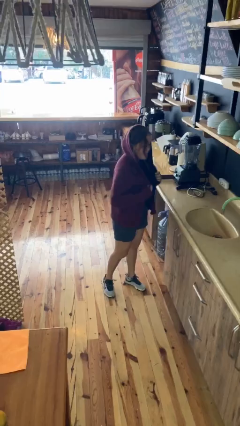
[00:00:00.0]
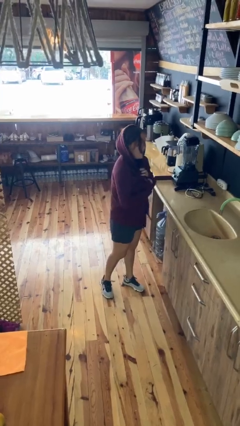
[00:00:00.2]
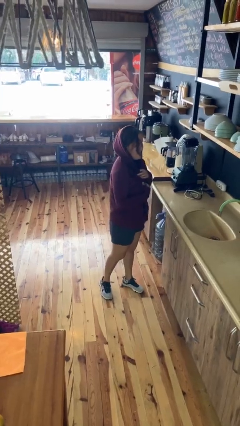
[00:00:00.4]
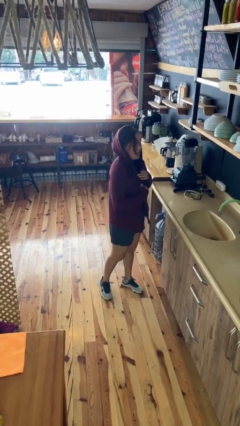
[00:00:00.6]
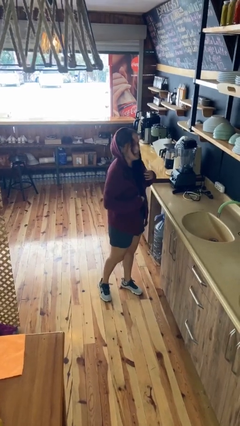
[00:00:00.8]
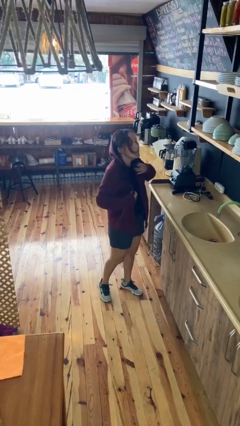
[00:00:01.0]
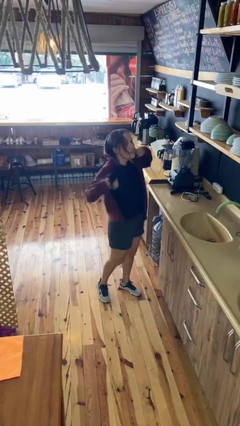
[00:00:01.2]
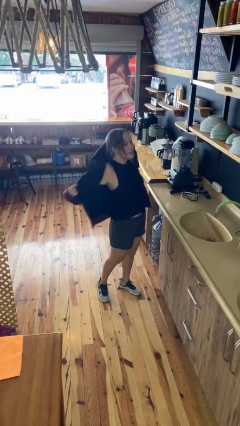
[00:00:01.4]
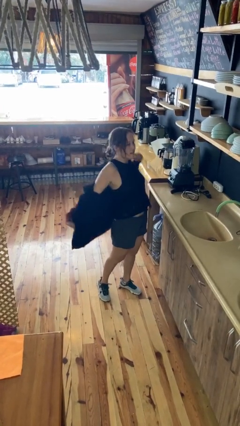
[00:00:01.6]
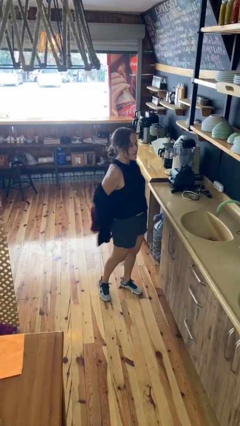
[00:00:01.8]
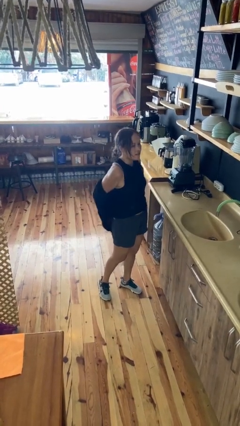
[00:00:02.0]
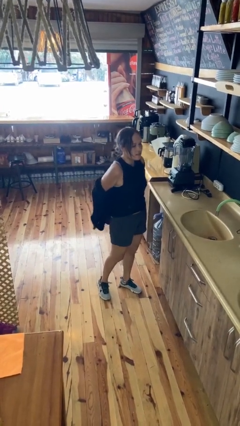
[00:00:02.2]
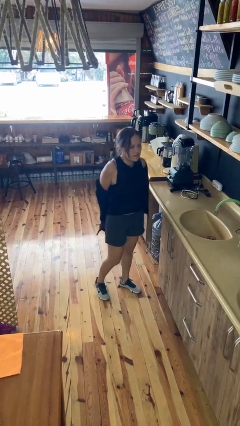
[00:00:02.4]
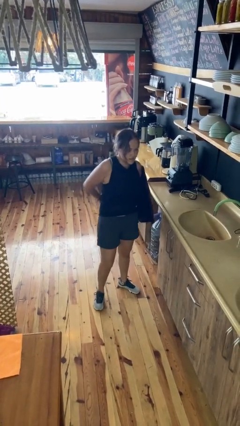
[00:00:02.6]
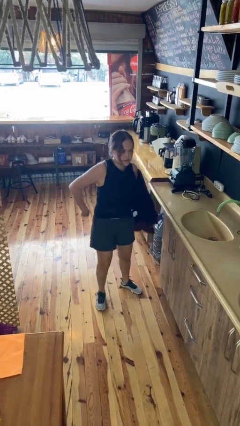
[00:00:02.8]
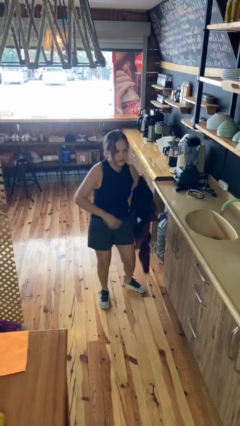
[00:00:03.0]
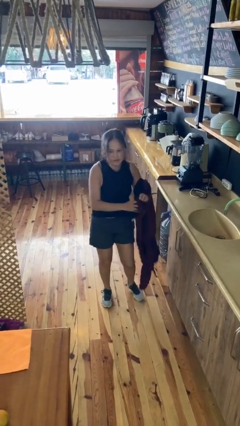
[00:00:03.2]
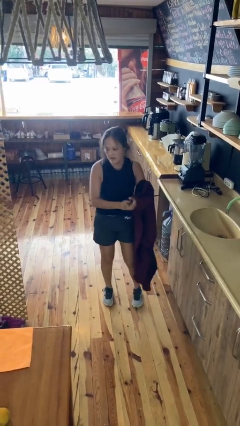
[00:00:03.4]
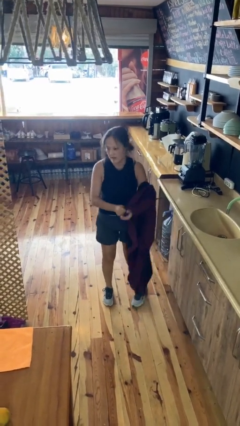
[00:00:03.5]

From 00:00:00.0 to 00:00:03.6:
person takes off hoodie

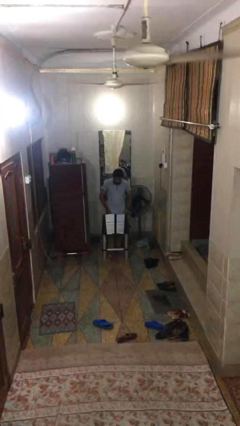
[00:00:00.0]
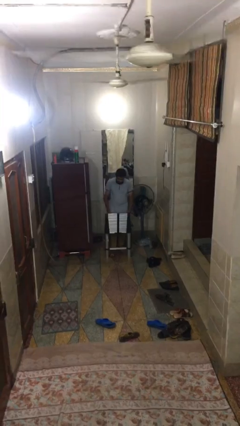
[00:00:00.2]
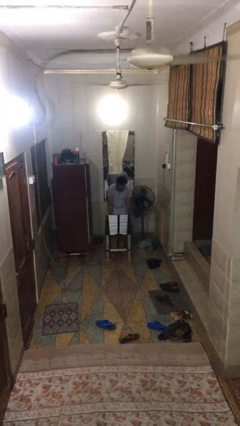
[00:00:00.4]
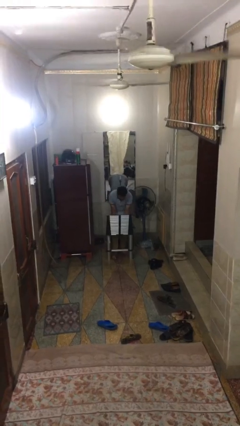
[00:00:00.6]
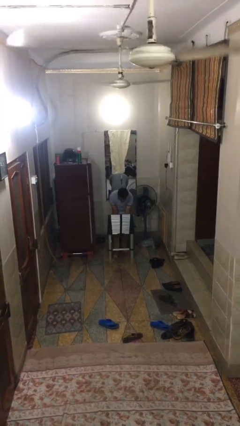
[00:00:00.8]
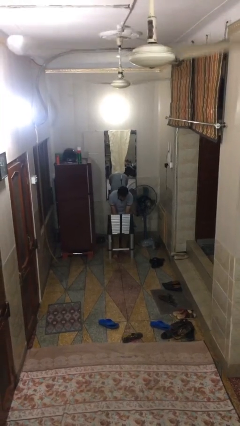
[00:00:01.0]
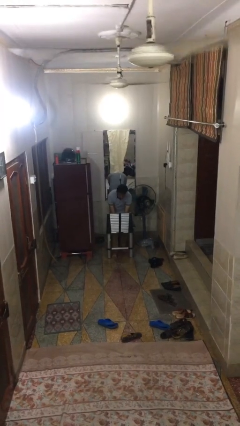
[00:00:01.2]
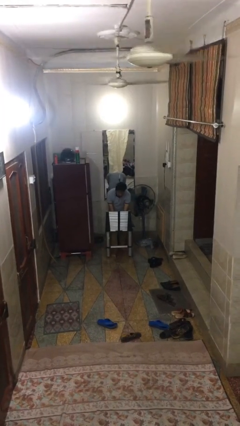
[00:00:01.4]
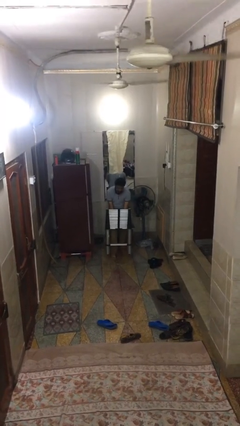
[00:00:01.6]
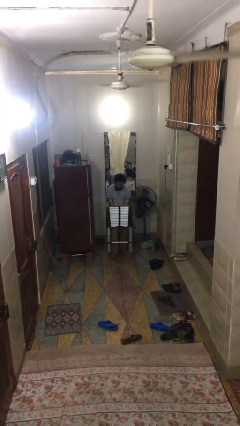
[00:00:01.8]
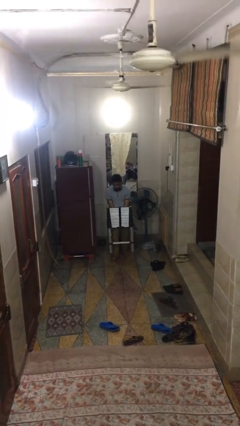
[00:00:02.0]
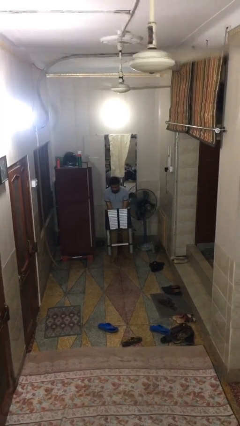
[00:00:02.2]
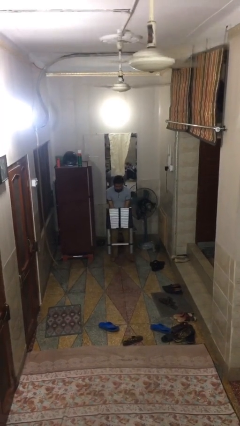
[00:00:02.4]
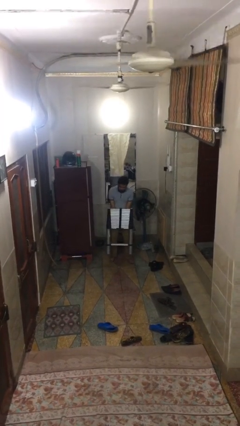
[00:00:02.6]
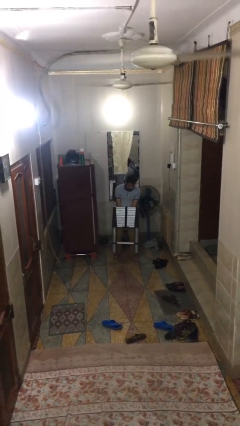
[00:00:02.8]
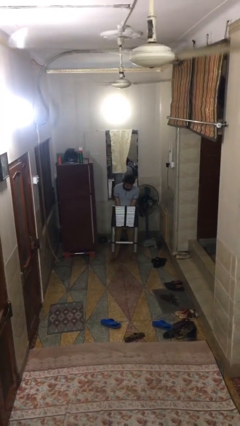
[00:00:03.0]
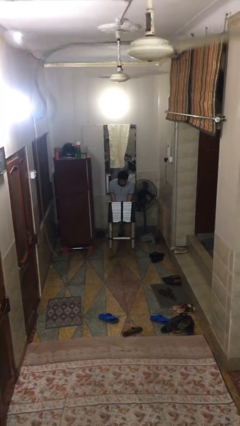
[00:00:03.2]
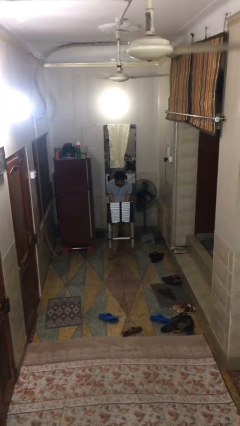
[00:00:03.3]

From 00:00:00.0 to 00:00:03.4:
person picks up object from floor

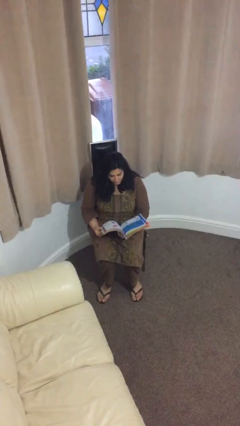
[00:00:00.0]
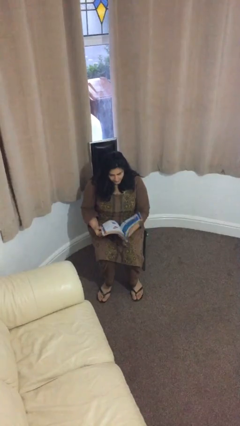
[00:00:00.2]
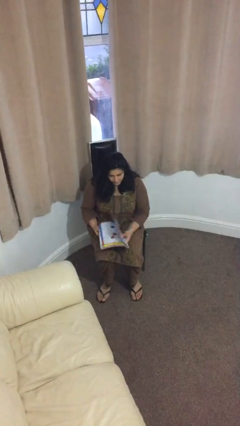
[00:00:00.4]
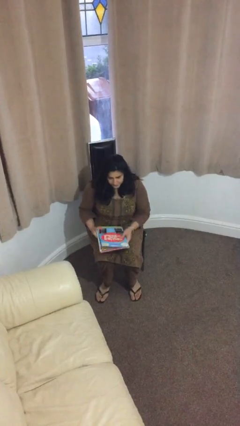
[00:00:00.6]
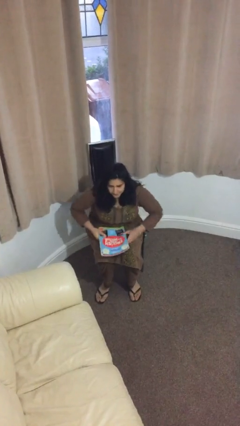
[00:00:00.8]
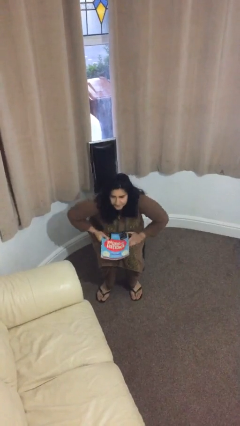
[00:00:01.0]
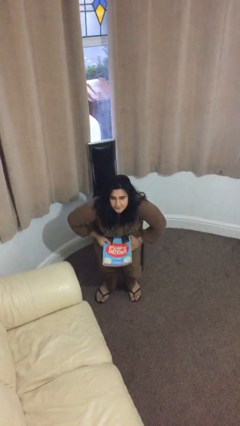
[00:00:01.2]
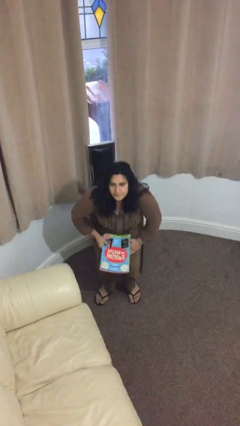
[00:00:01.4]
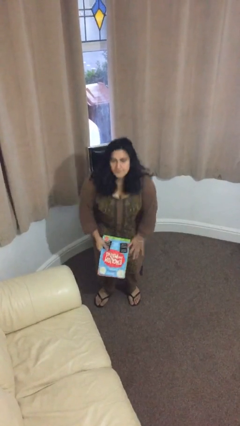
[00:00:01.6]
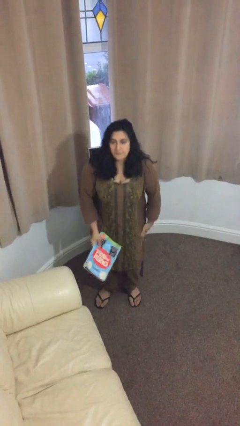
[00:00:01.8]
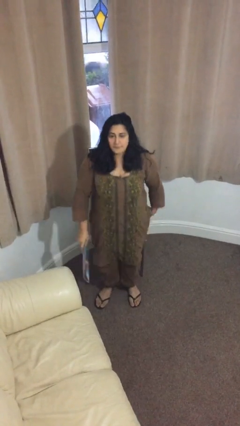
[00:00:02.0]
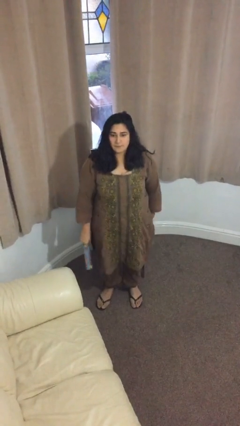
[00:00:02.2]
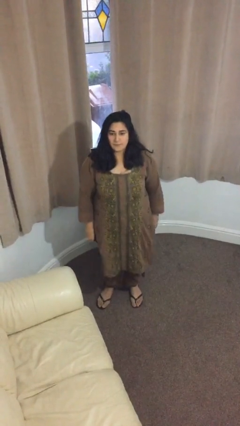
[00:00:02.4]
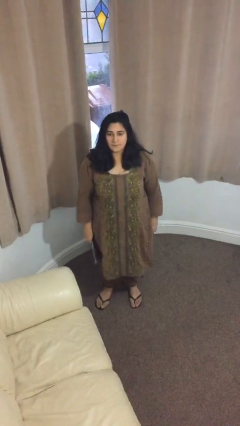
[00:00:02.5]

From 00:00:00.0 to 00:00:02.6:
person stands up

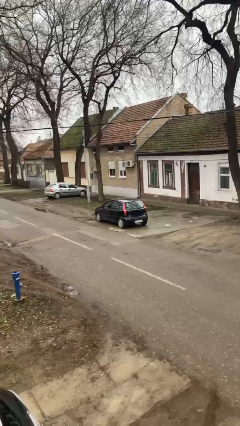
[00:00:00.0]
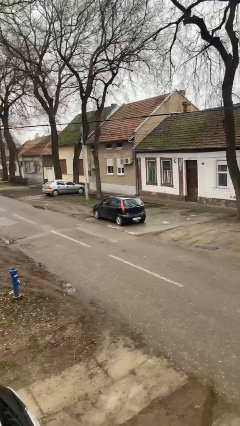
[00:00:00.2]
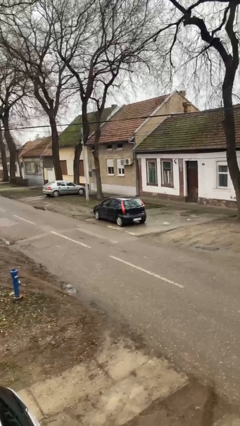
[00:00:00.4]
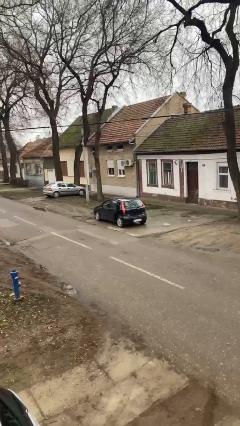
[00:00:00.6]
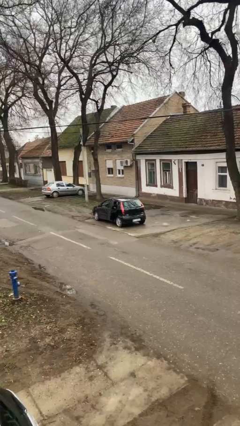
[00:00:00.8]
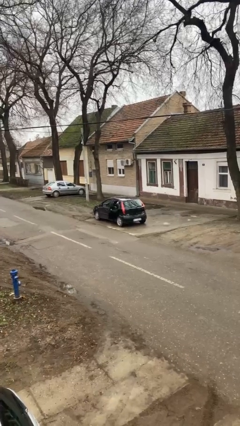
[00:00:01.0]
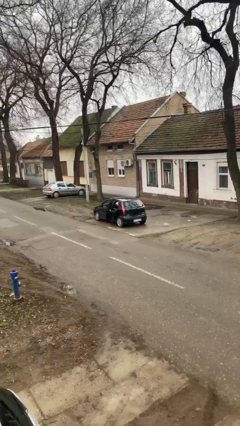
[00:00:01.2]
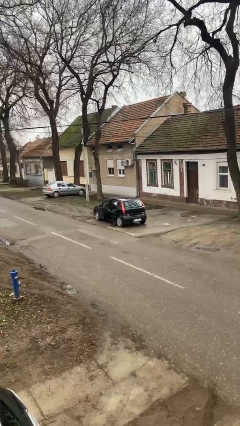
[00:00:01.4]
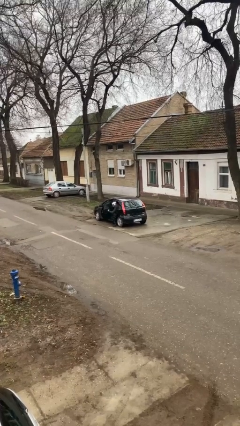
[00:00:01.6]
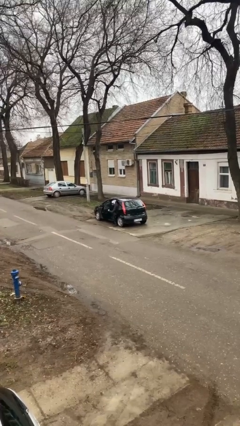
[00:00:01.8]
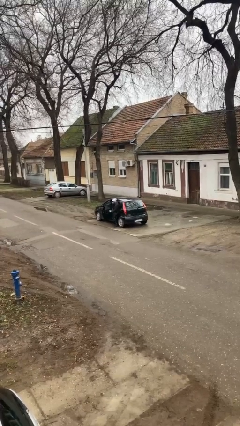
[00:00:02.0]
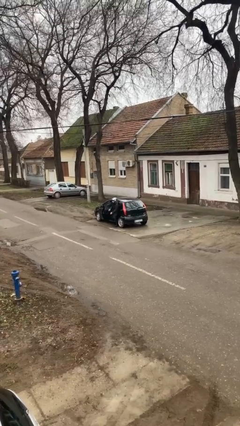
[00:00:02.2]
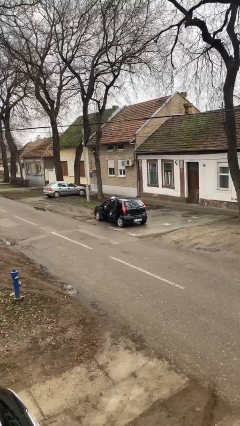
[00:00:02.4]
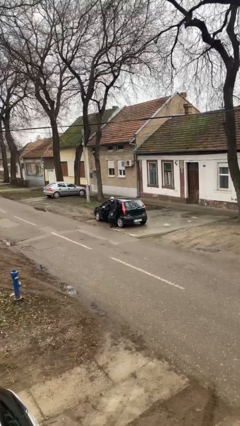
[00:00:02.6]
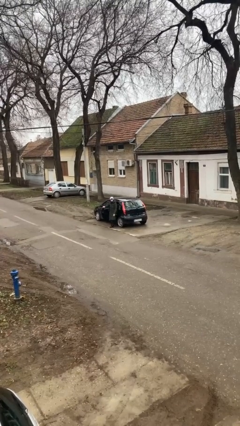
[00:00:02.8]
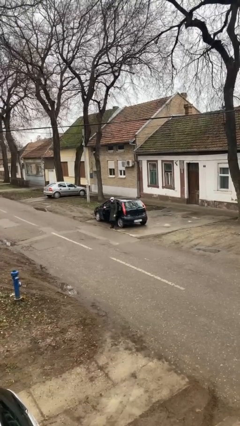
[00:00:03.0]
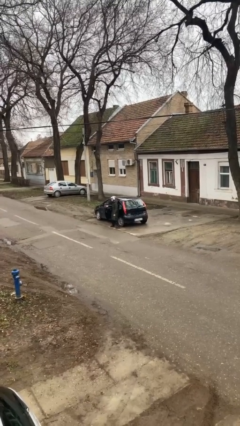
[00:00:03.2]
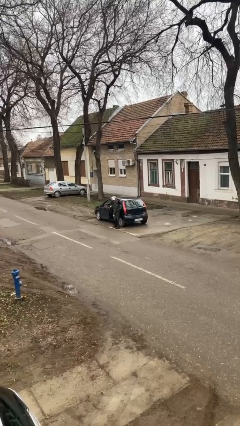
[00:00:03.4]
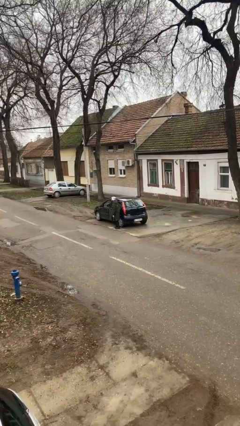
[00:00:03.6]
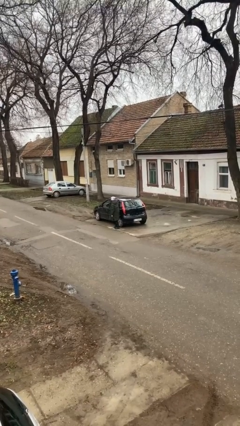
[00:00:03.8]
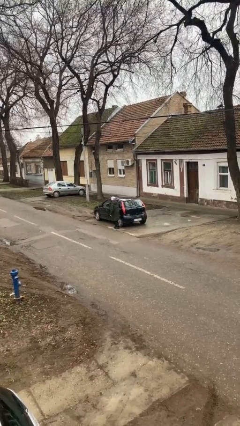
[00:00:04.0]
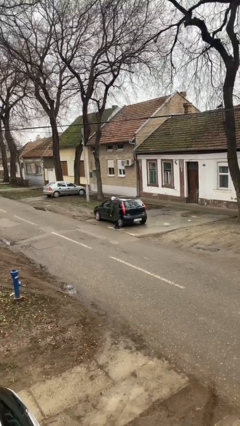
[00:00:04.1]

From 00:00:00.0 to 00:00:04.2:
car drops off person

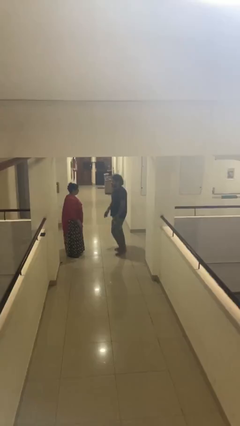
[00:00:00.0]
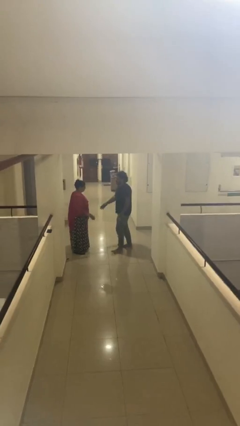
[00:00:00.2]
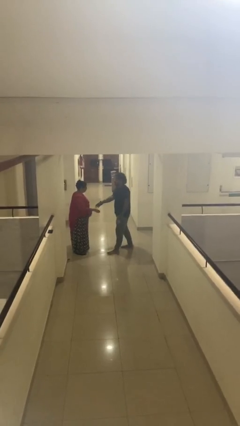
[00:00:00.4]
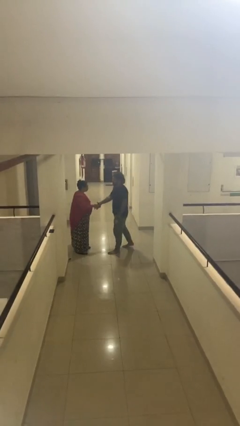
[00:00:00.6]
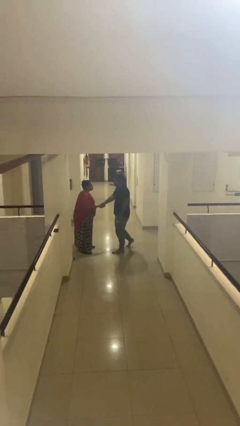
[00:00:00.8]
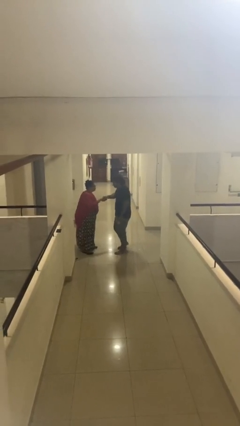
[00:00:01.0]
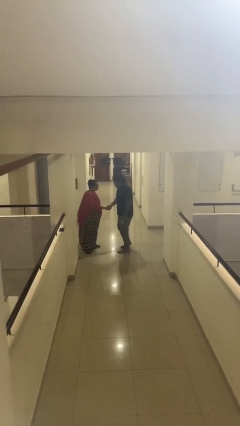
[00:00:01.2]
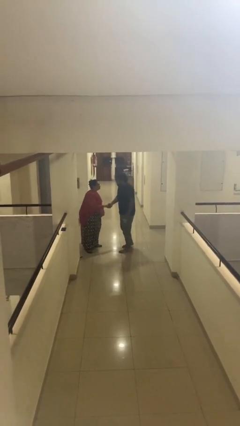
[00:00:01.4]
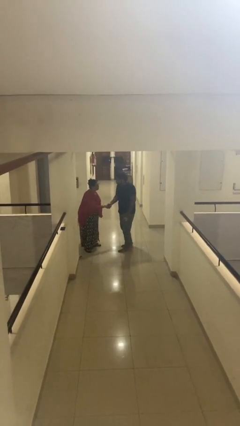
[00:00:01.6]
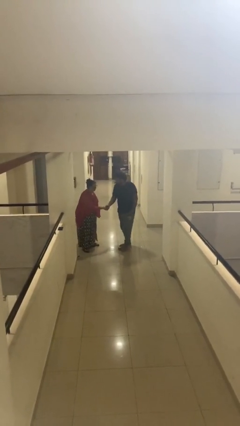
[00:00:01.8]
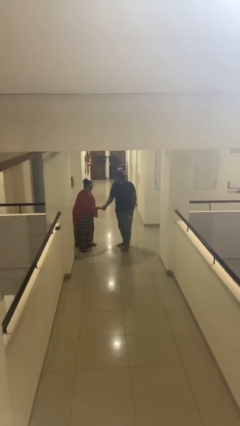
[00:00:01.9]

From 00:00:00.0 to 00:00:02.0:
person shakes hand

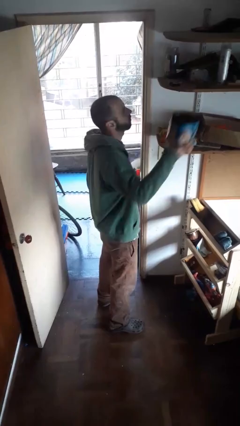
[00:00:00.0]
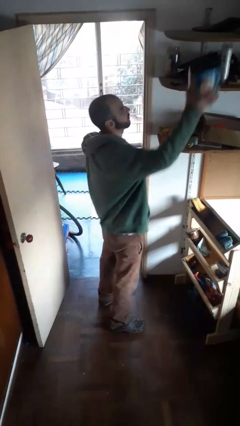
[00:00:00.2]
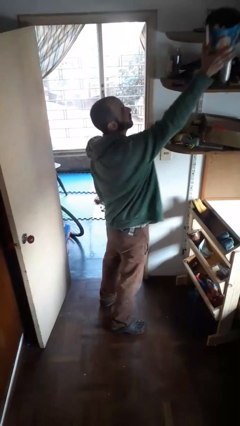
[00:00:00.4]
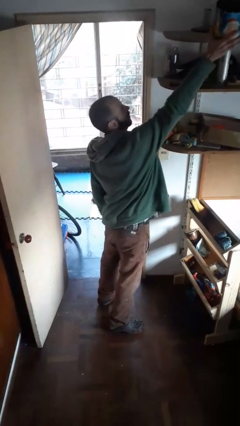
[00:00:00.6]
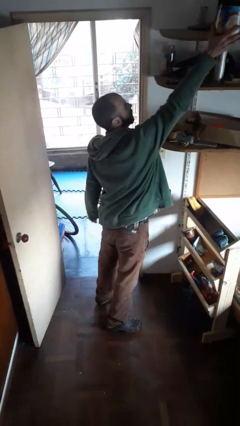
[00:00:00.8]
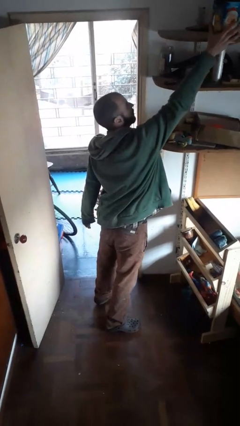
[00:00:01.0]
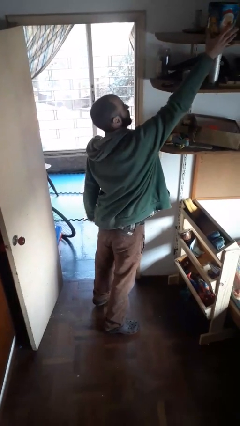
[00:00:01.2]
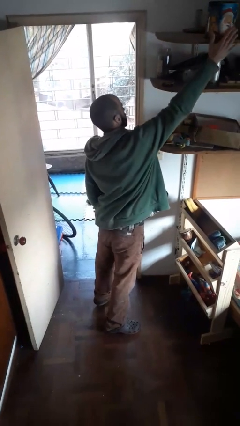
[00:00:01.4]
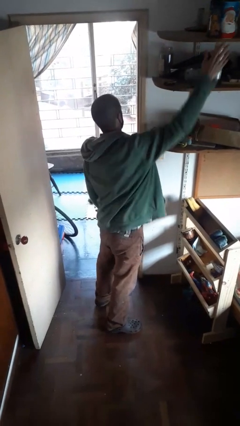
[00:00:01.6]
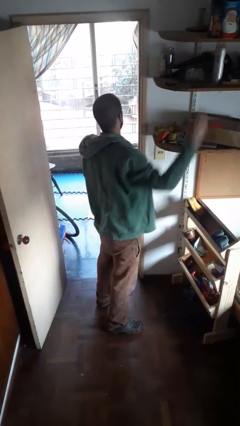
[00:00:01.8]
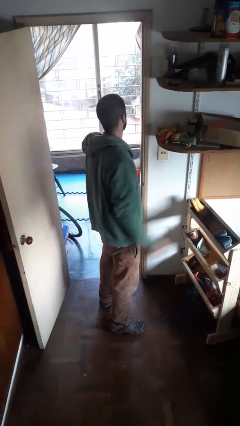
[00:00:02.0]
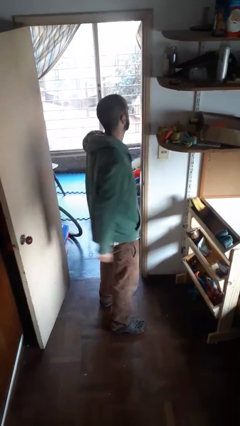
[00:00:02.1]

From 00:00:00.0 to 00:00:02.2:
person puts down object on shelf
